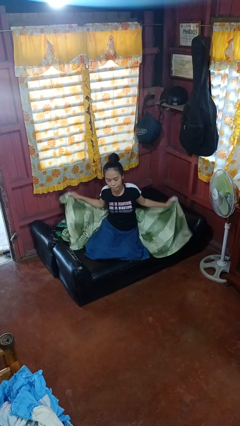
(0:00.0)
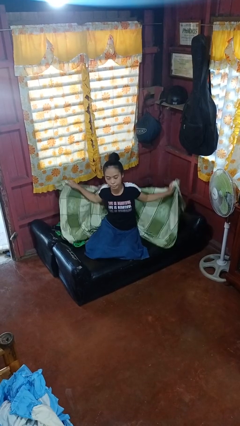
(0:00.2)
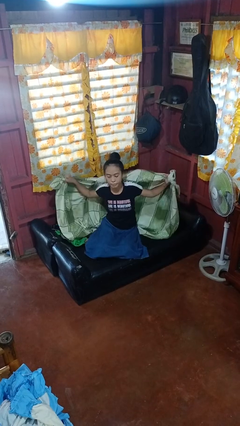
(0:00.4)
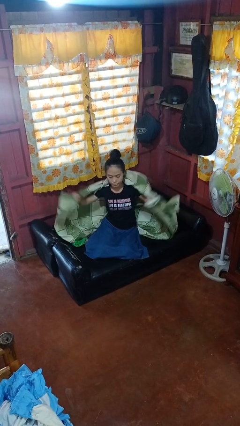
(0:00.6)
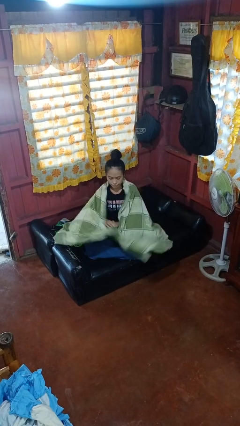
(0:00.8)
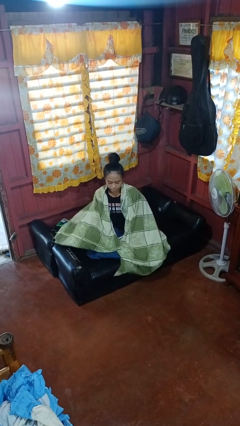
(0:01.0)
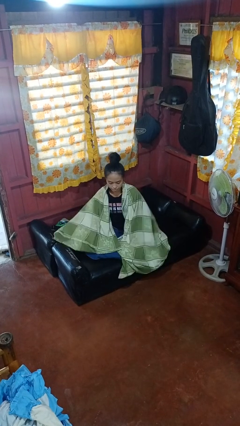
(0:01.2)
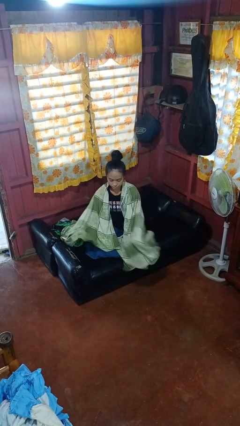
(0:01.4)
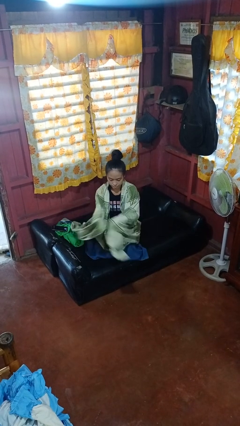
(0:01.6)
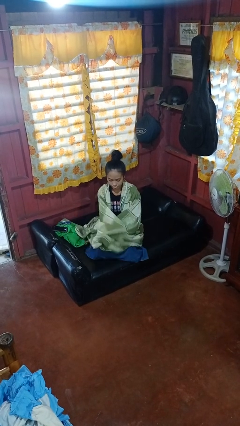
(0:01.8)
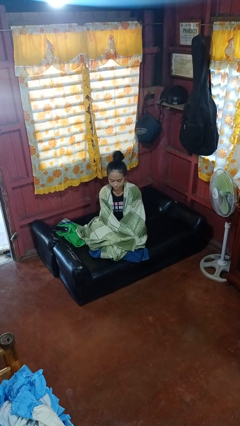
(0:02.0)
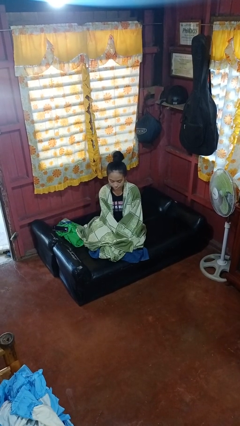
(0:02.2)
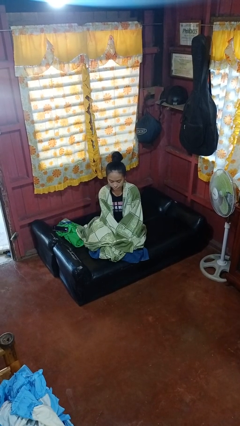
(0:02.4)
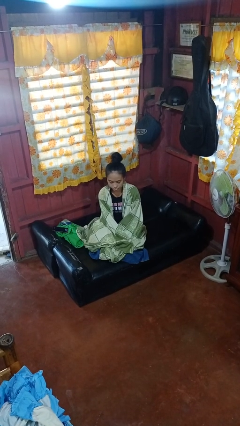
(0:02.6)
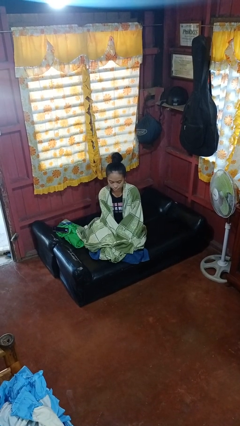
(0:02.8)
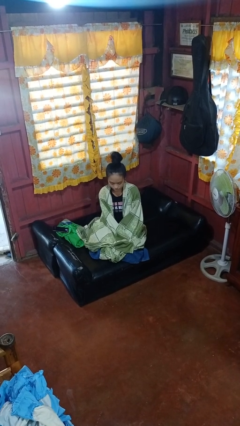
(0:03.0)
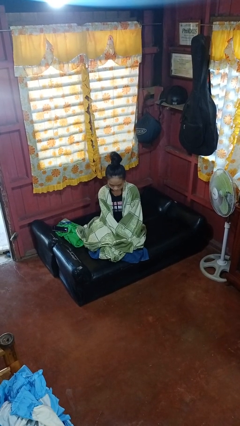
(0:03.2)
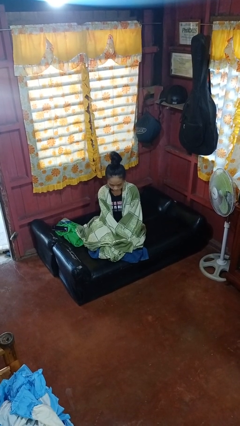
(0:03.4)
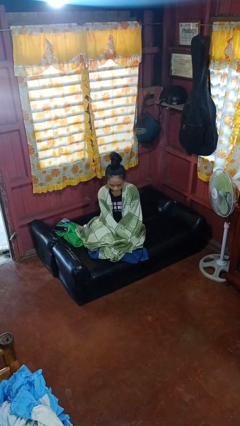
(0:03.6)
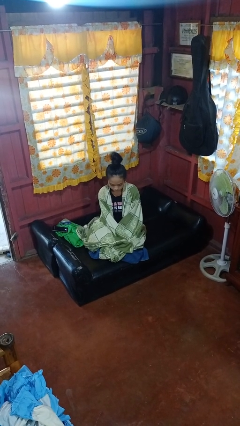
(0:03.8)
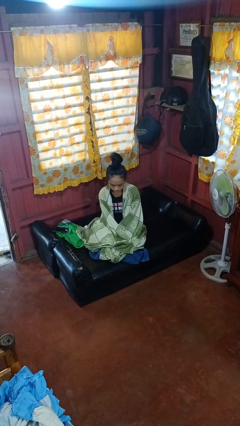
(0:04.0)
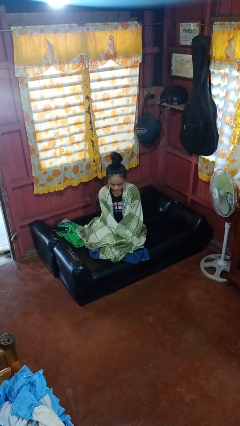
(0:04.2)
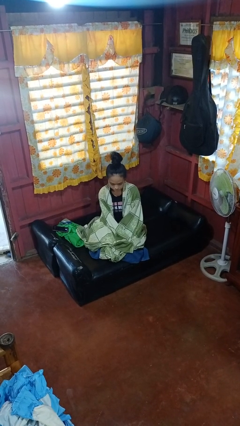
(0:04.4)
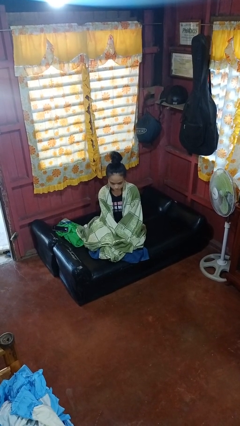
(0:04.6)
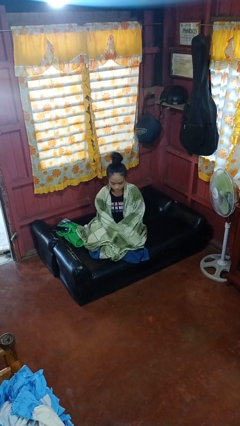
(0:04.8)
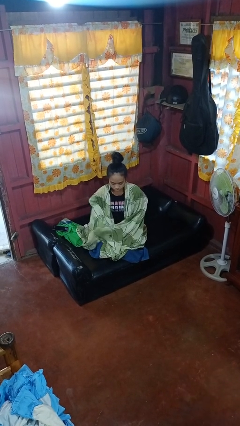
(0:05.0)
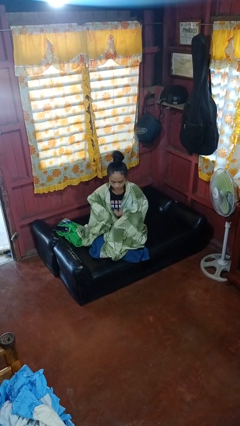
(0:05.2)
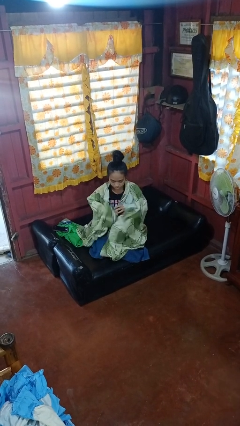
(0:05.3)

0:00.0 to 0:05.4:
person covers with blanket

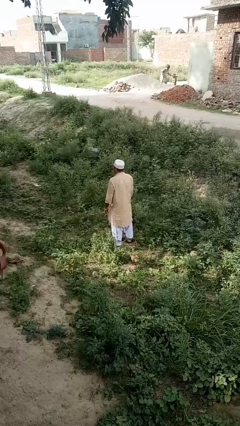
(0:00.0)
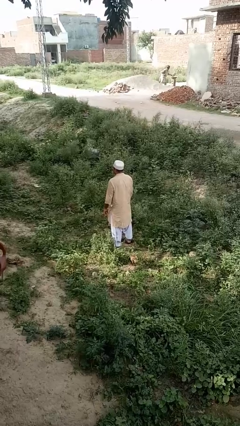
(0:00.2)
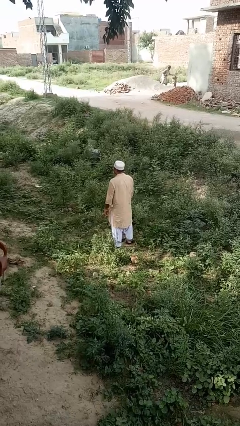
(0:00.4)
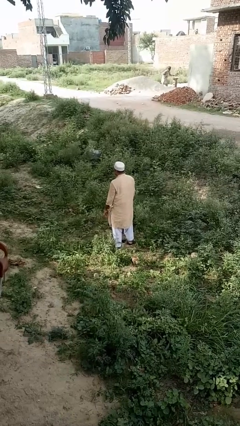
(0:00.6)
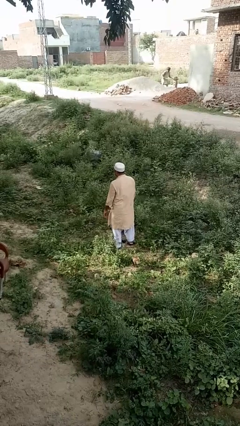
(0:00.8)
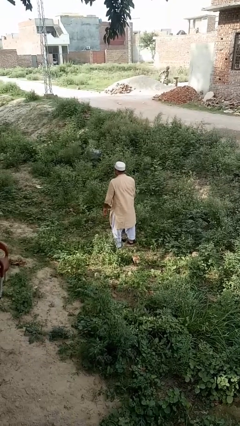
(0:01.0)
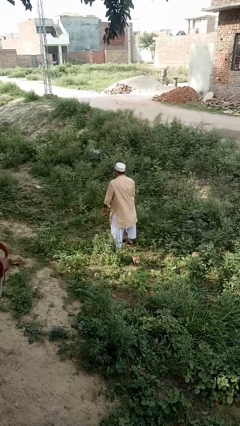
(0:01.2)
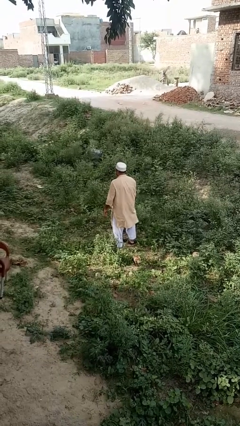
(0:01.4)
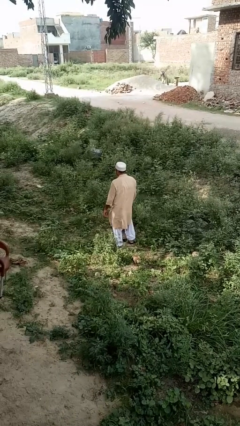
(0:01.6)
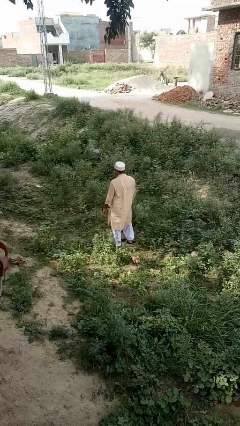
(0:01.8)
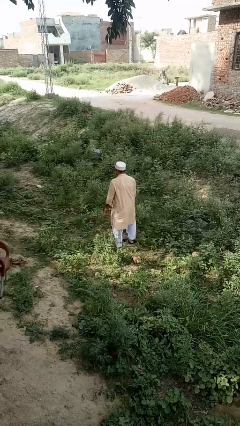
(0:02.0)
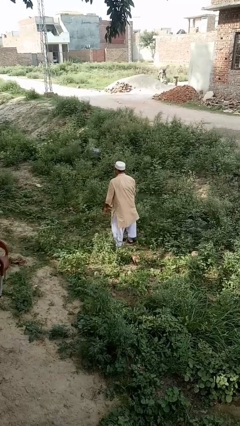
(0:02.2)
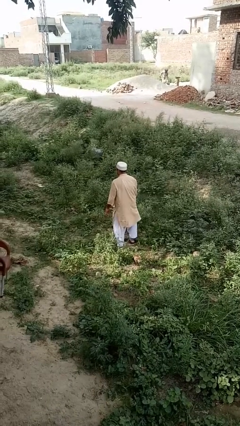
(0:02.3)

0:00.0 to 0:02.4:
person wiggles hips

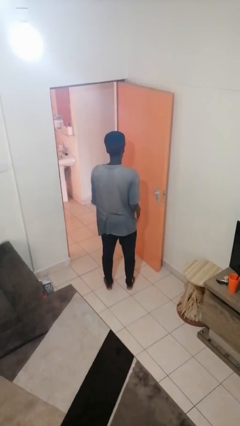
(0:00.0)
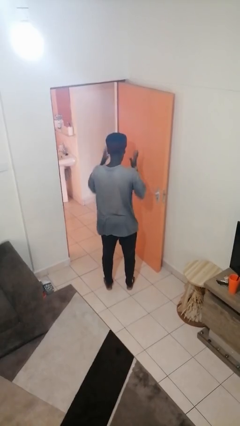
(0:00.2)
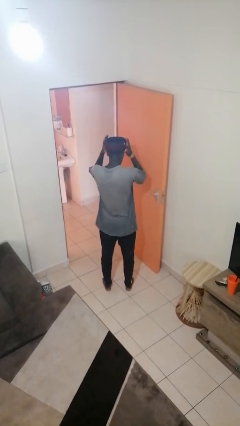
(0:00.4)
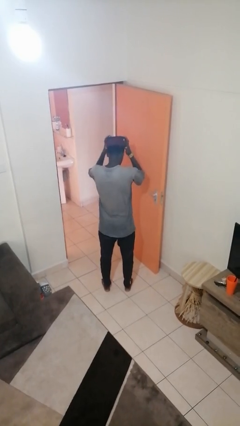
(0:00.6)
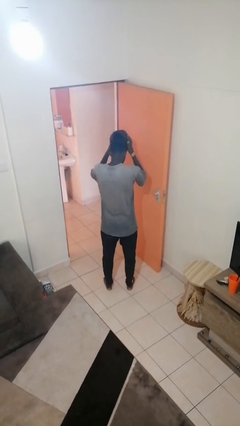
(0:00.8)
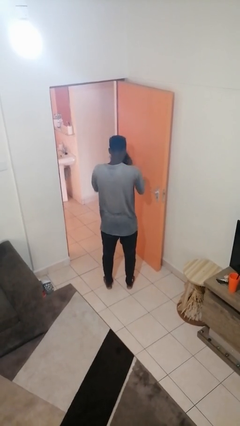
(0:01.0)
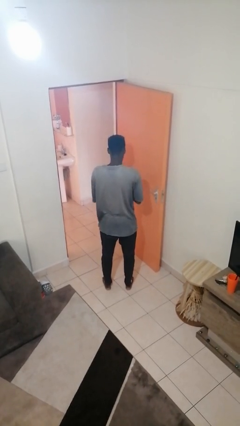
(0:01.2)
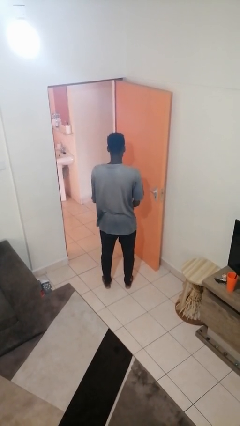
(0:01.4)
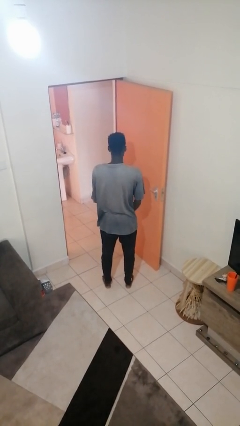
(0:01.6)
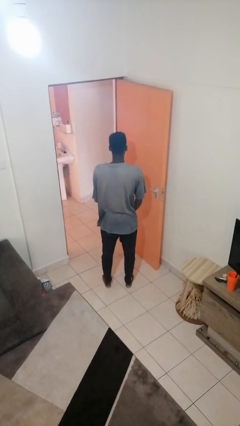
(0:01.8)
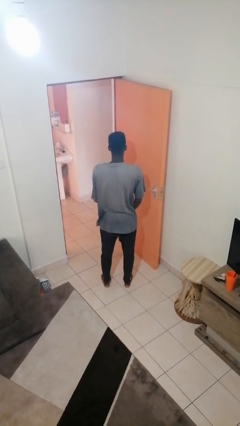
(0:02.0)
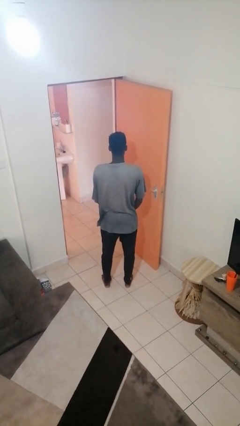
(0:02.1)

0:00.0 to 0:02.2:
person takes off hat

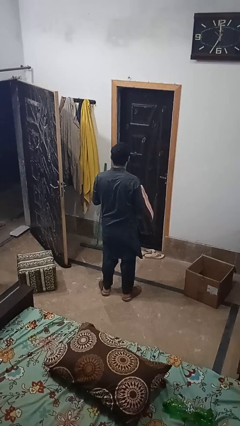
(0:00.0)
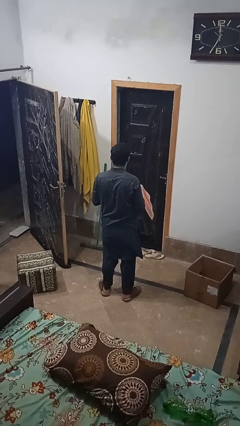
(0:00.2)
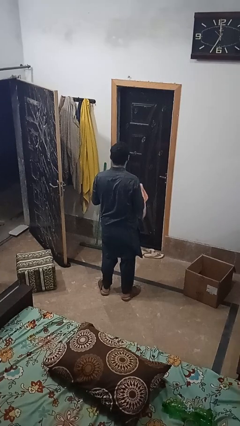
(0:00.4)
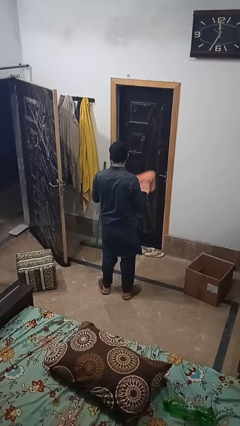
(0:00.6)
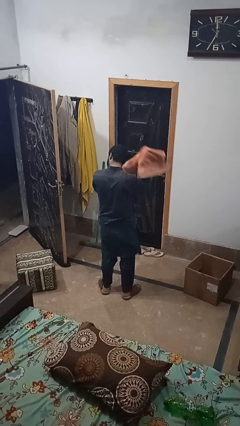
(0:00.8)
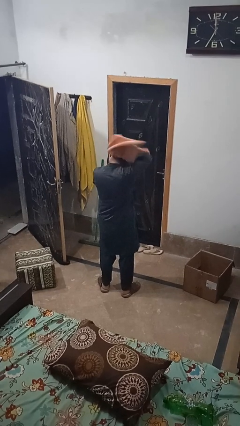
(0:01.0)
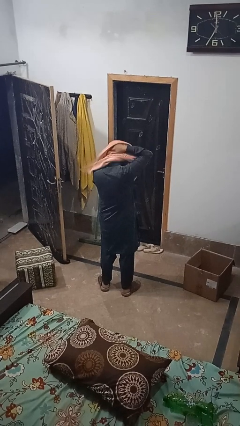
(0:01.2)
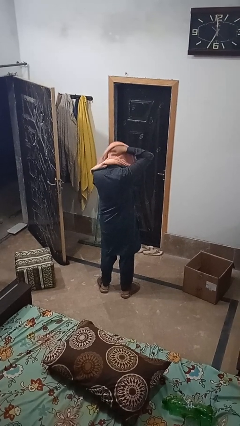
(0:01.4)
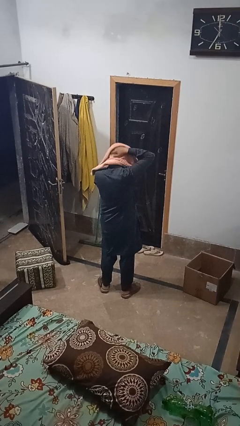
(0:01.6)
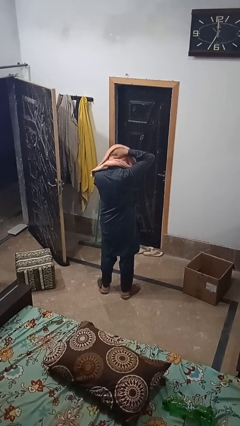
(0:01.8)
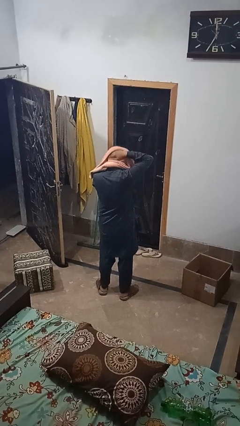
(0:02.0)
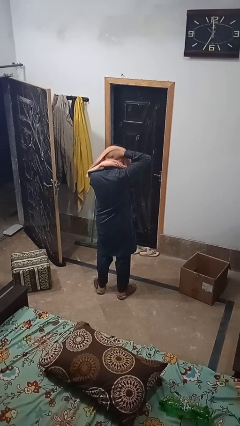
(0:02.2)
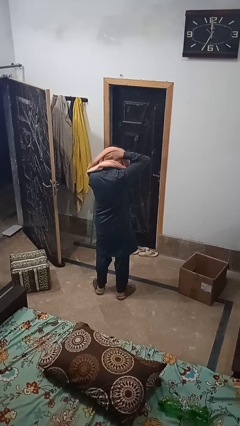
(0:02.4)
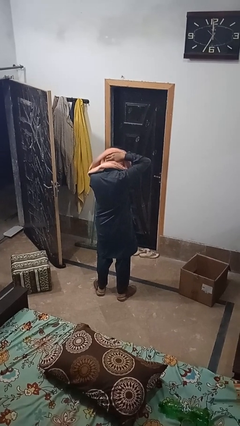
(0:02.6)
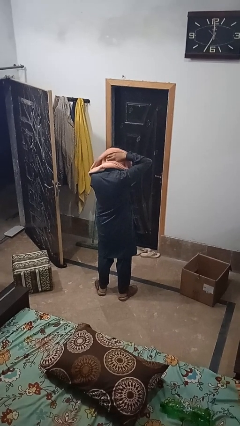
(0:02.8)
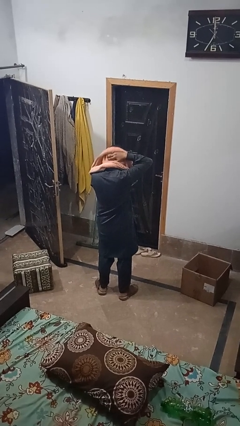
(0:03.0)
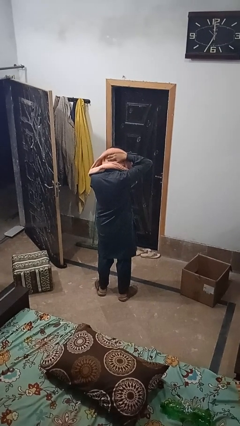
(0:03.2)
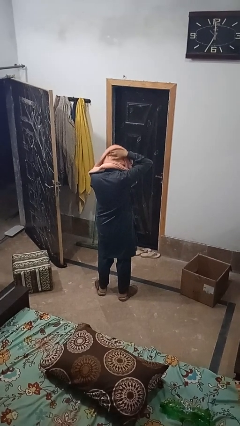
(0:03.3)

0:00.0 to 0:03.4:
person dries hair with towel

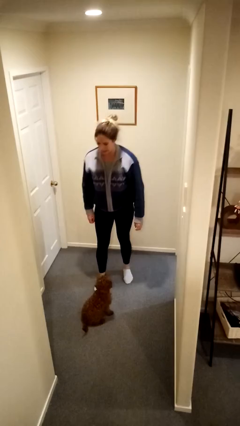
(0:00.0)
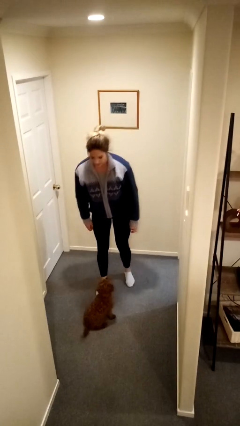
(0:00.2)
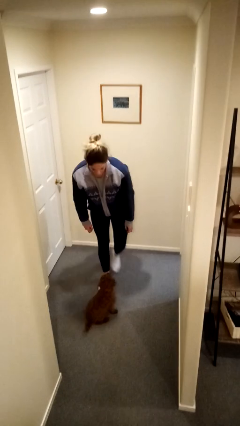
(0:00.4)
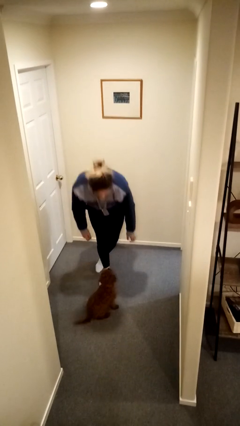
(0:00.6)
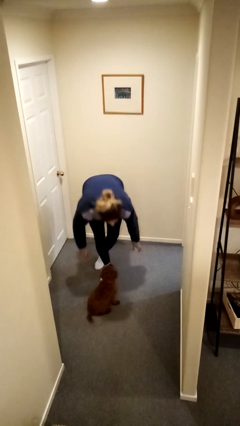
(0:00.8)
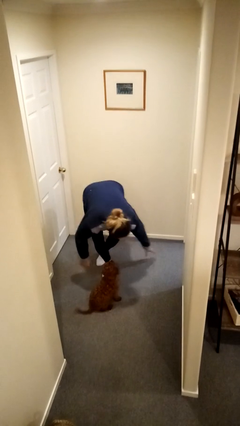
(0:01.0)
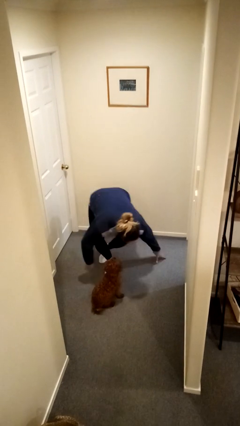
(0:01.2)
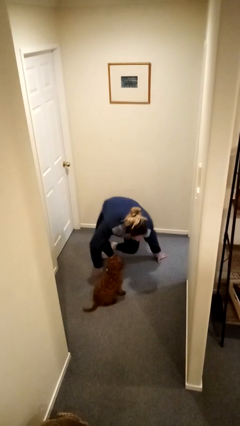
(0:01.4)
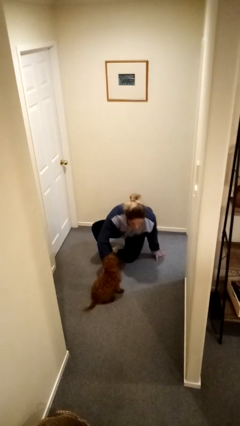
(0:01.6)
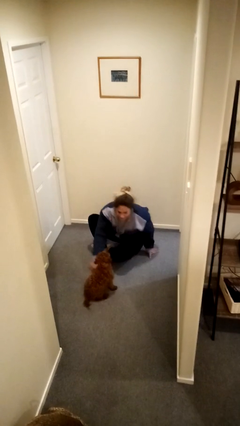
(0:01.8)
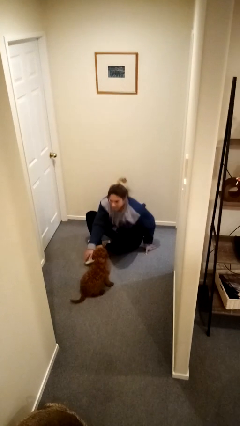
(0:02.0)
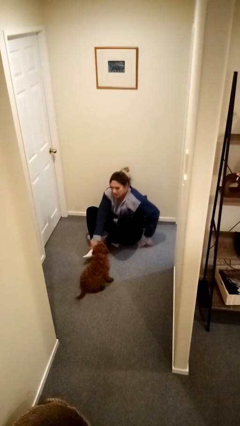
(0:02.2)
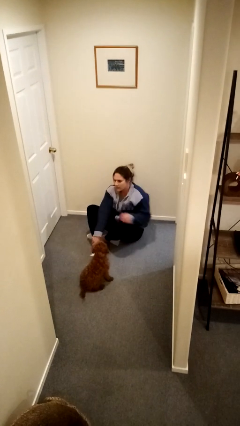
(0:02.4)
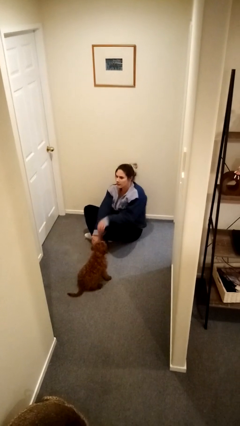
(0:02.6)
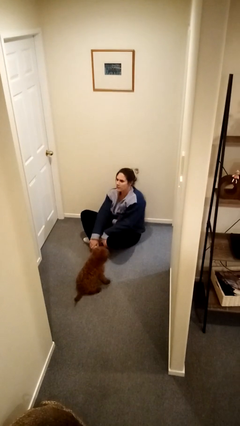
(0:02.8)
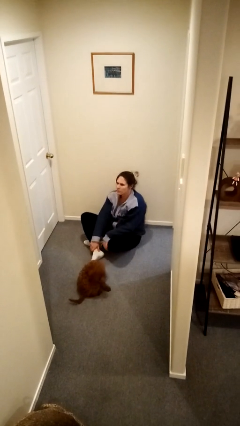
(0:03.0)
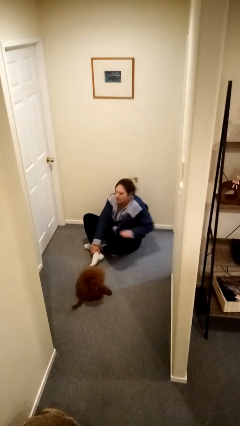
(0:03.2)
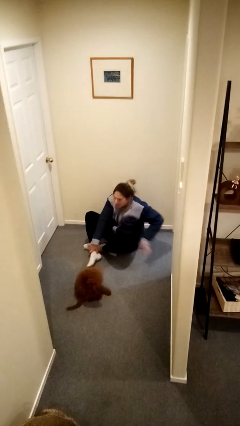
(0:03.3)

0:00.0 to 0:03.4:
person sits crisscross

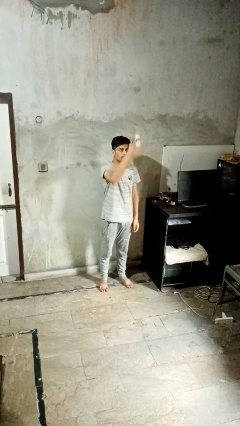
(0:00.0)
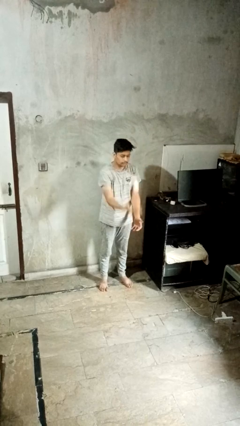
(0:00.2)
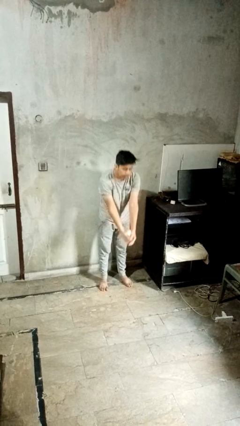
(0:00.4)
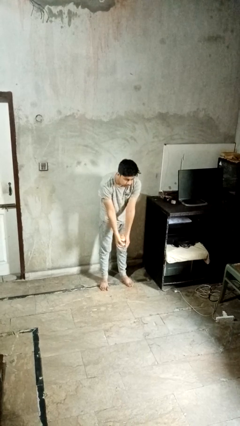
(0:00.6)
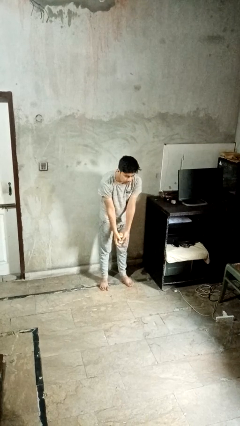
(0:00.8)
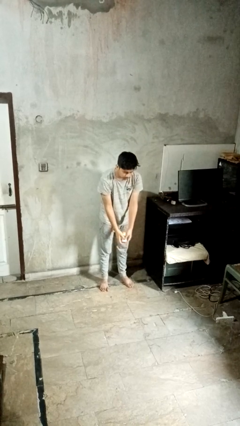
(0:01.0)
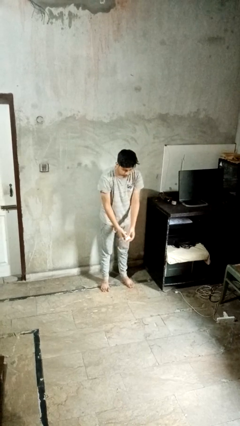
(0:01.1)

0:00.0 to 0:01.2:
person catches dropped object
